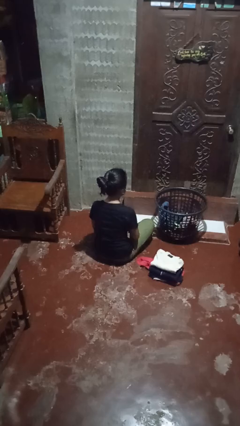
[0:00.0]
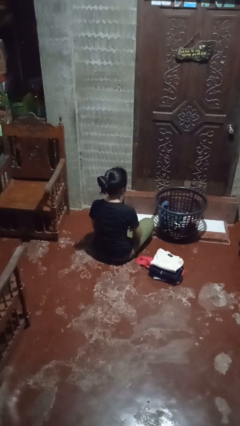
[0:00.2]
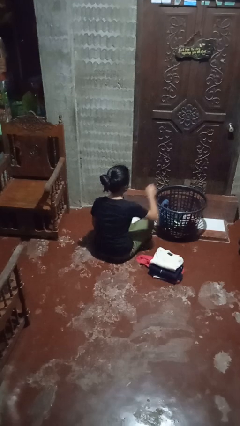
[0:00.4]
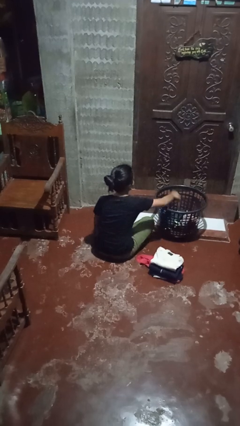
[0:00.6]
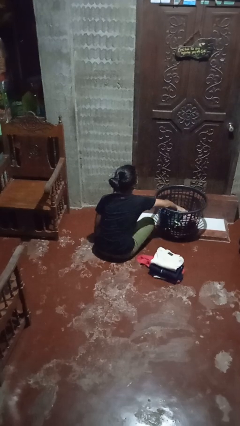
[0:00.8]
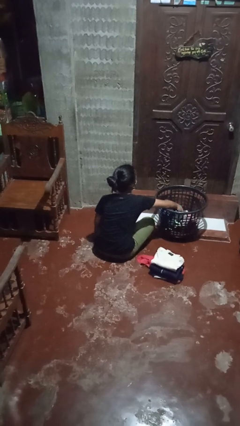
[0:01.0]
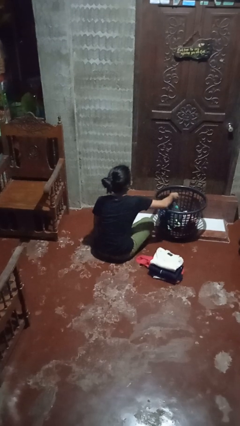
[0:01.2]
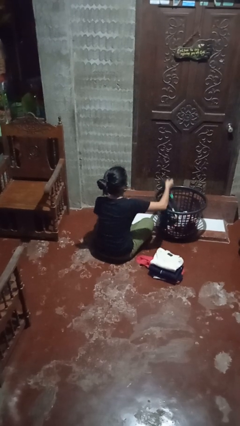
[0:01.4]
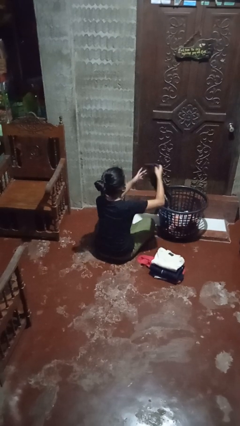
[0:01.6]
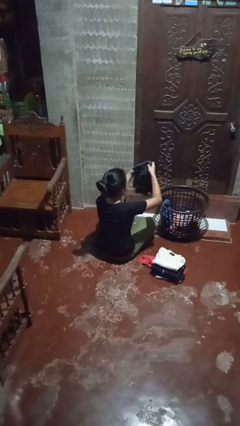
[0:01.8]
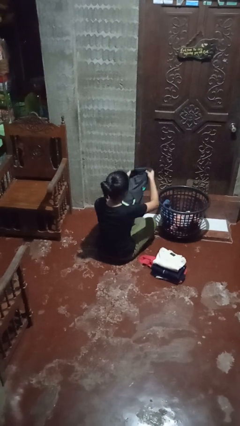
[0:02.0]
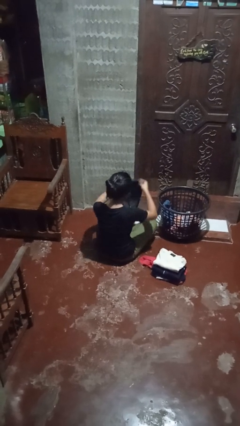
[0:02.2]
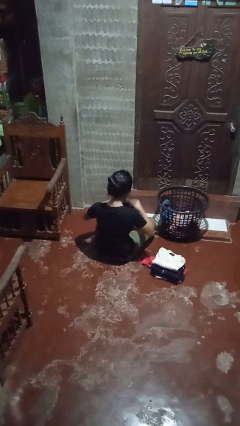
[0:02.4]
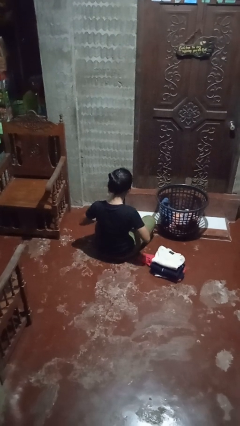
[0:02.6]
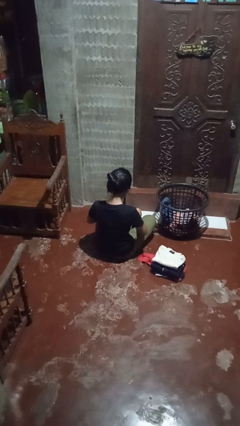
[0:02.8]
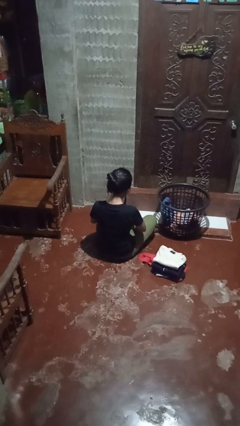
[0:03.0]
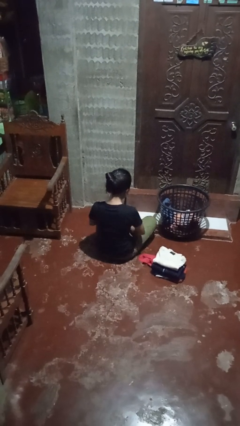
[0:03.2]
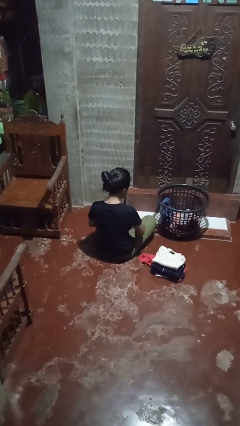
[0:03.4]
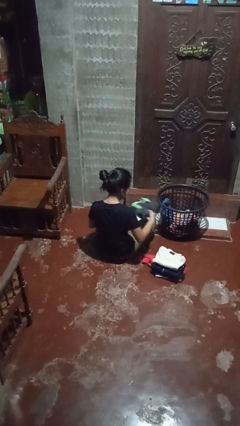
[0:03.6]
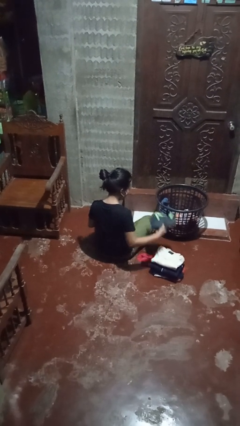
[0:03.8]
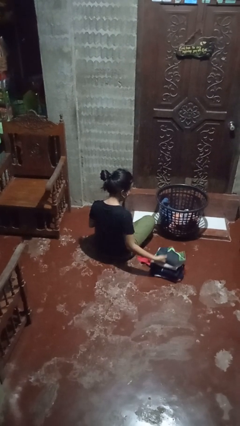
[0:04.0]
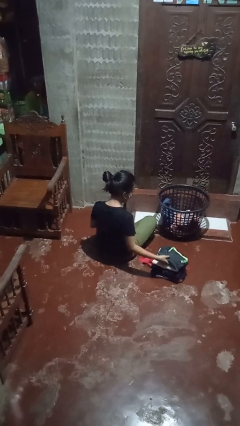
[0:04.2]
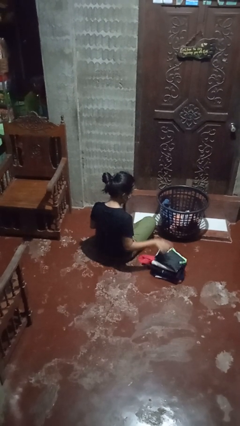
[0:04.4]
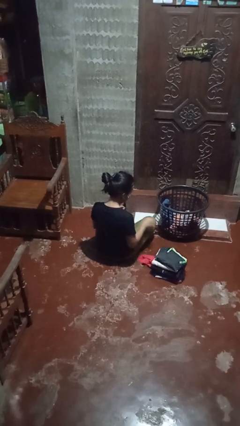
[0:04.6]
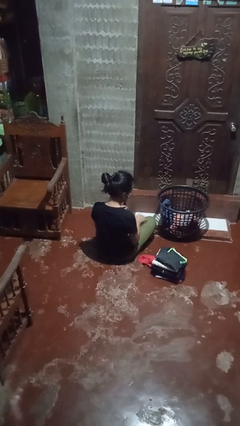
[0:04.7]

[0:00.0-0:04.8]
person folds shirt

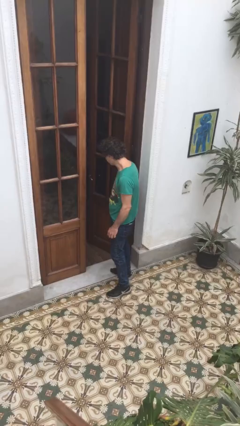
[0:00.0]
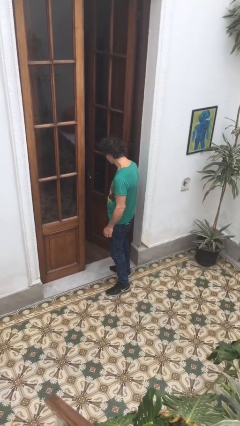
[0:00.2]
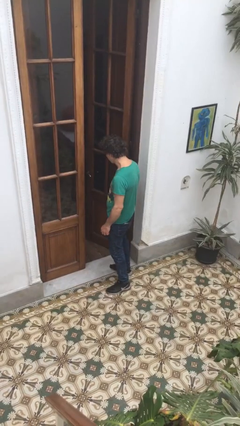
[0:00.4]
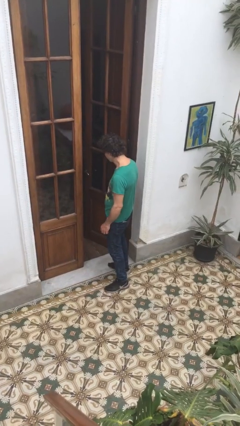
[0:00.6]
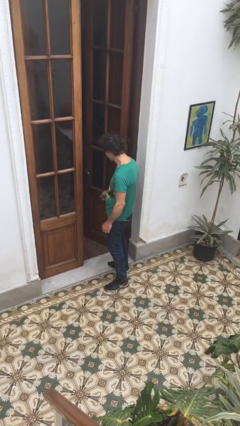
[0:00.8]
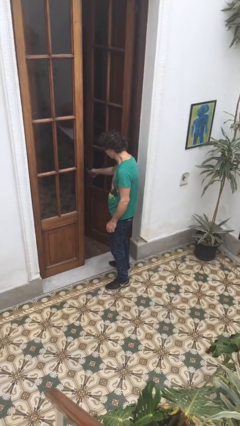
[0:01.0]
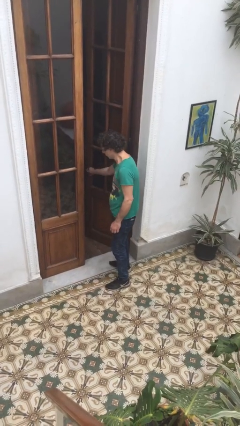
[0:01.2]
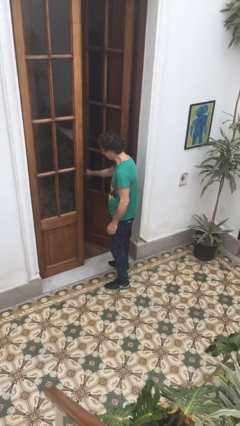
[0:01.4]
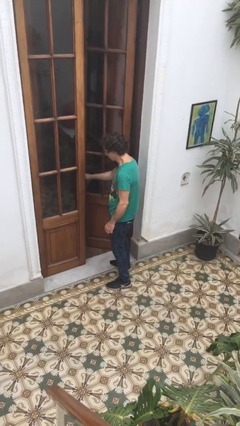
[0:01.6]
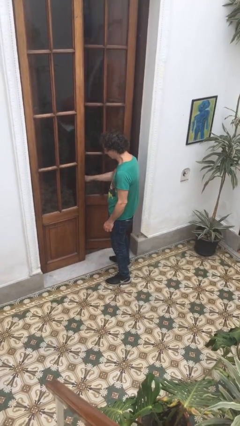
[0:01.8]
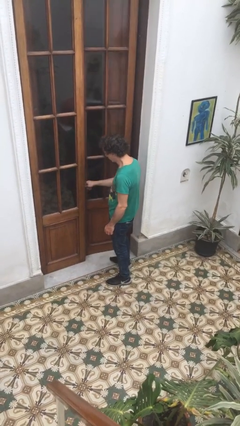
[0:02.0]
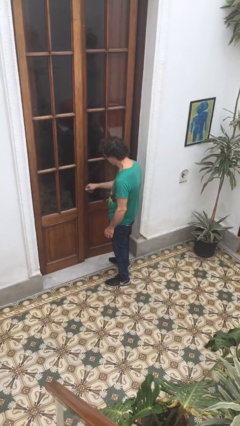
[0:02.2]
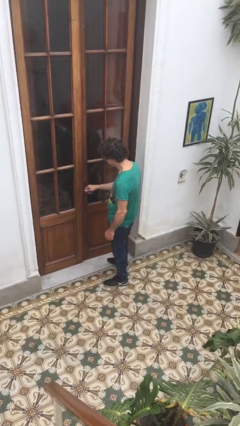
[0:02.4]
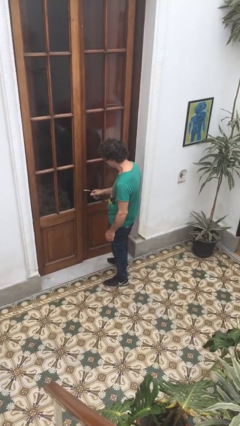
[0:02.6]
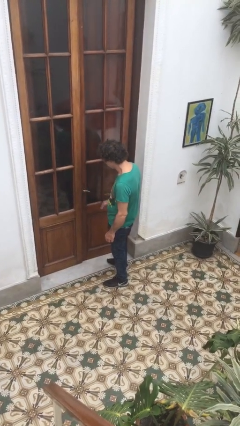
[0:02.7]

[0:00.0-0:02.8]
person closes facility door

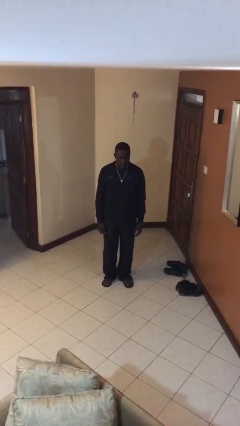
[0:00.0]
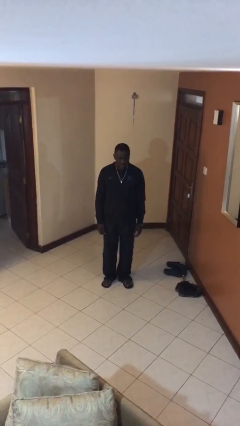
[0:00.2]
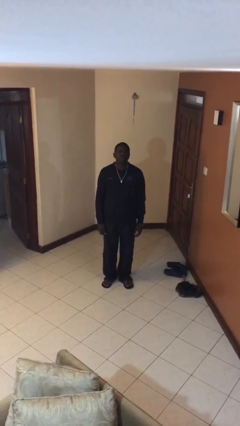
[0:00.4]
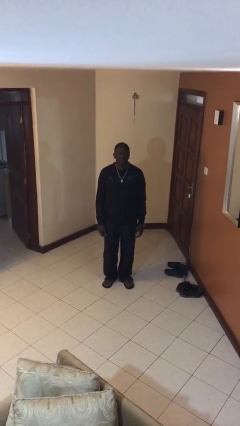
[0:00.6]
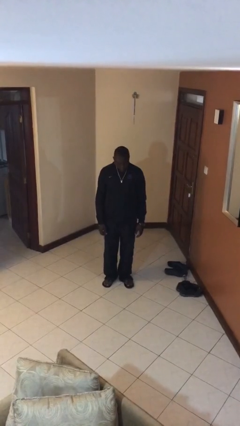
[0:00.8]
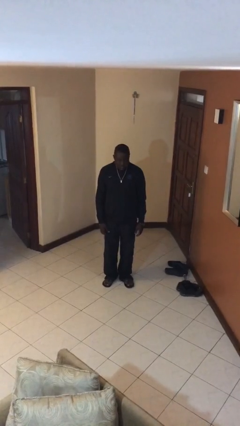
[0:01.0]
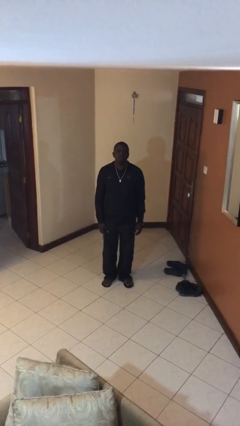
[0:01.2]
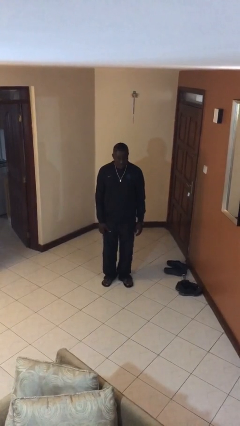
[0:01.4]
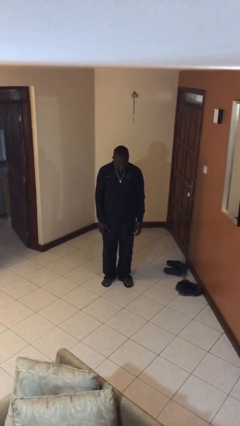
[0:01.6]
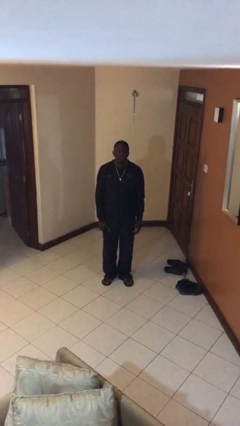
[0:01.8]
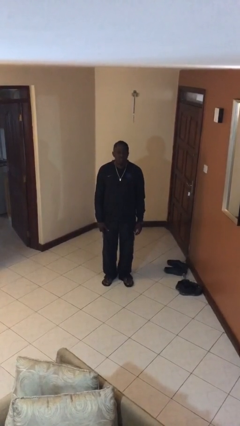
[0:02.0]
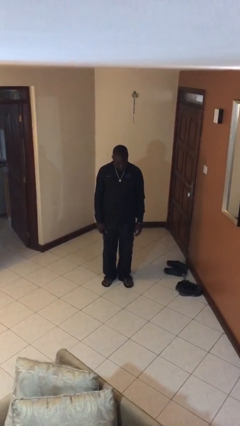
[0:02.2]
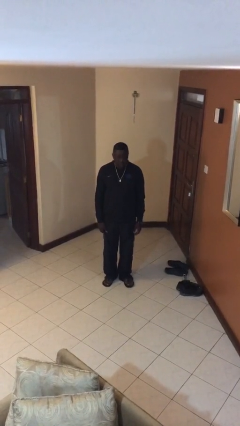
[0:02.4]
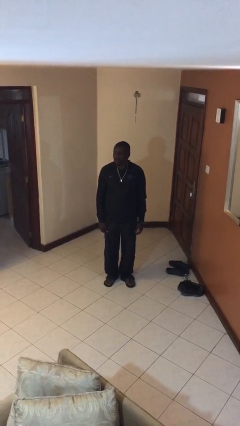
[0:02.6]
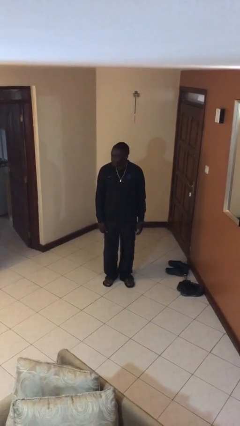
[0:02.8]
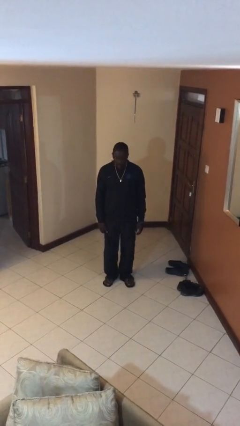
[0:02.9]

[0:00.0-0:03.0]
person nods head

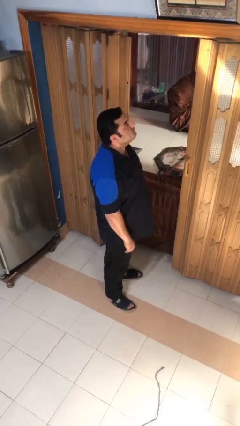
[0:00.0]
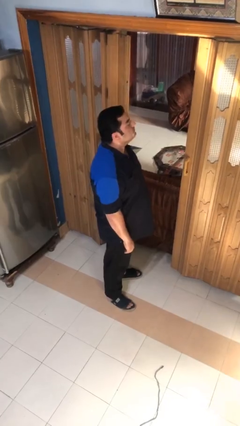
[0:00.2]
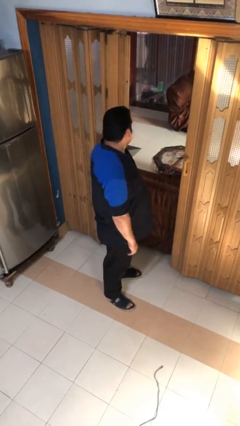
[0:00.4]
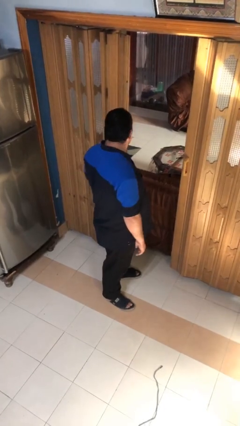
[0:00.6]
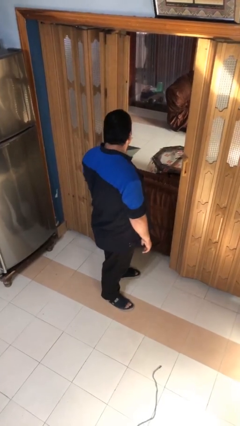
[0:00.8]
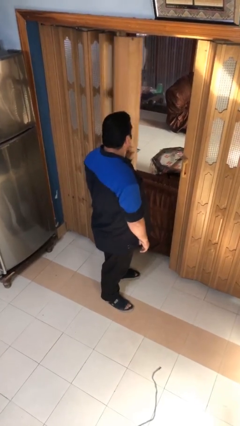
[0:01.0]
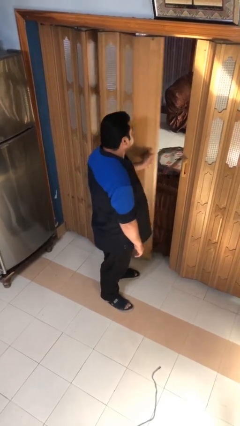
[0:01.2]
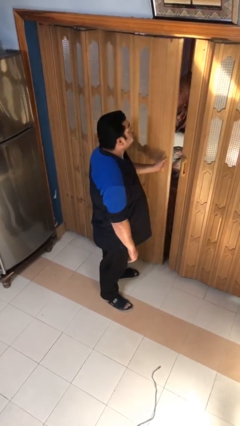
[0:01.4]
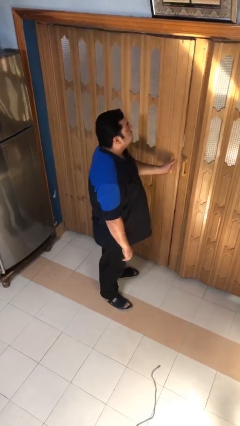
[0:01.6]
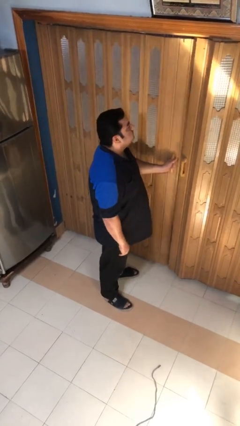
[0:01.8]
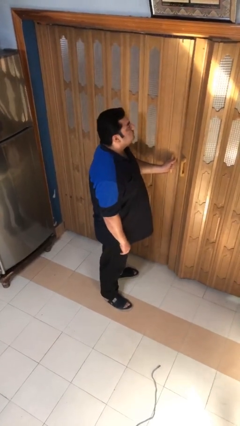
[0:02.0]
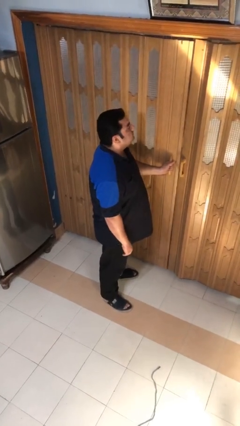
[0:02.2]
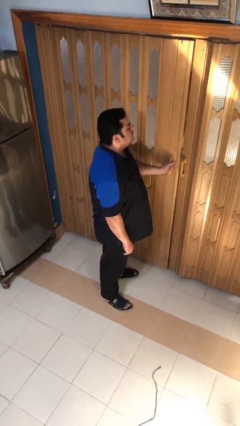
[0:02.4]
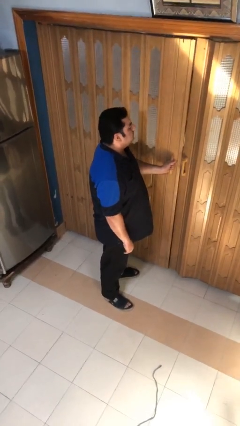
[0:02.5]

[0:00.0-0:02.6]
person closes sliding door

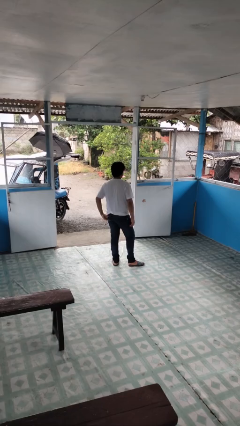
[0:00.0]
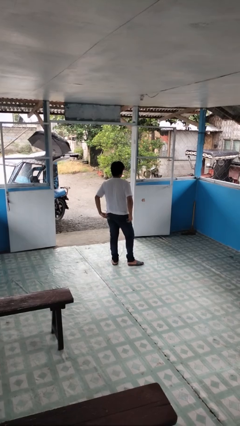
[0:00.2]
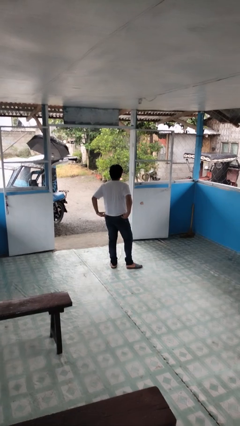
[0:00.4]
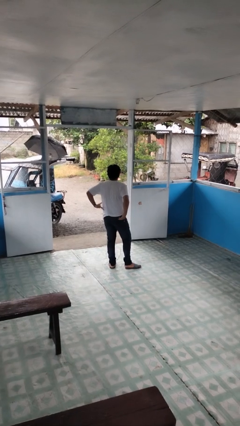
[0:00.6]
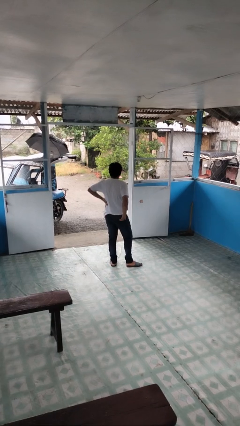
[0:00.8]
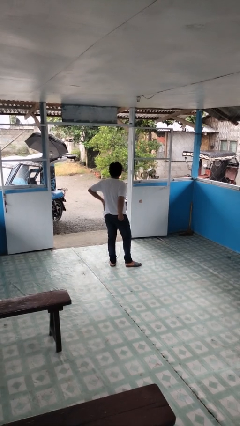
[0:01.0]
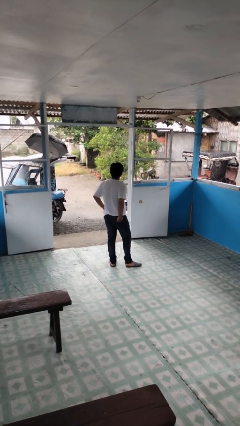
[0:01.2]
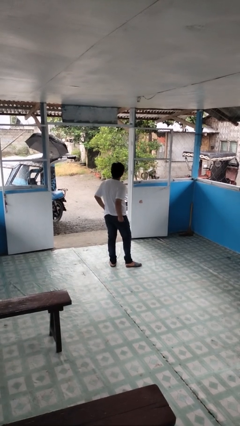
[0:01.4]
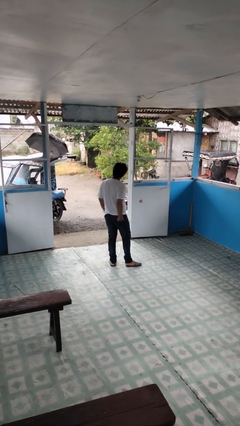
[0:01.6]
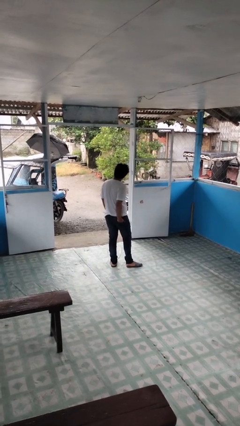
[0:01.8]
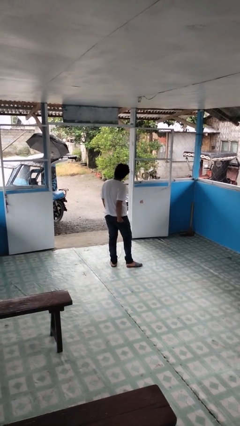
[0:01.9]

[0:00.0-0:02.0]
person puts hands in back pockets

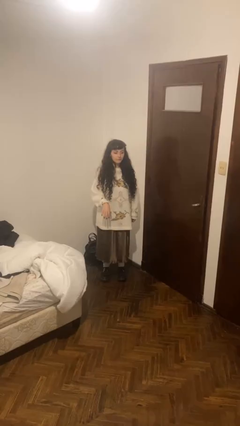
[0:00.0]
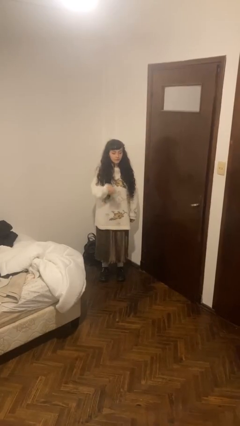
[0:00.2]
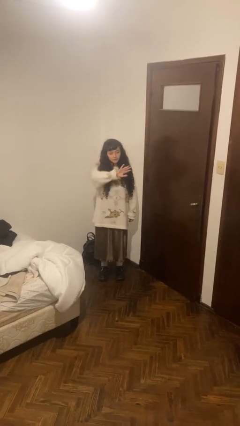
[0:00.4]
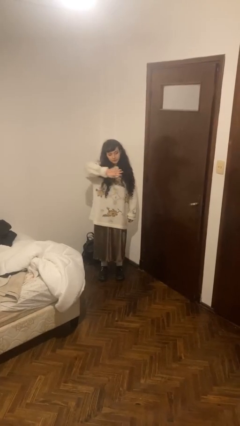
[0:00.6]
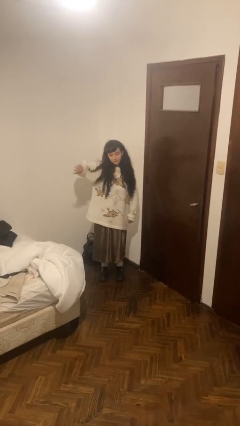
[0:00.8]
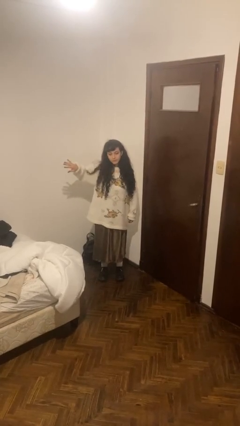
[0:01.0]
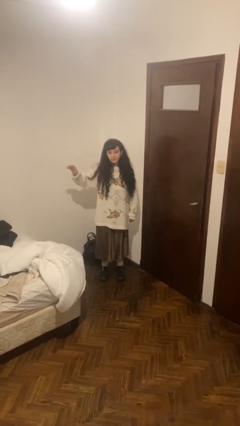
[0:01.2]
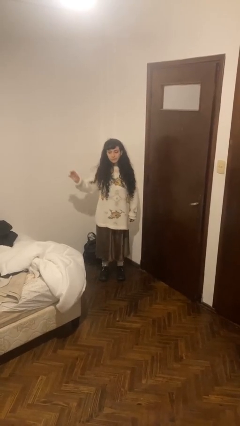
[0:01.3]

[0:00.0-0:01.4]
person gestures swipe right

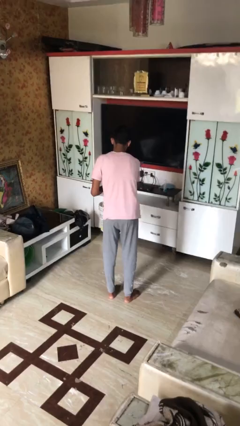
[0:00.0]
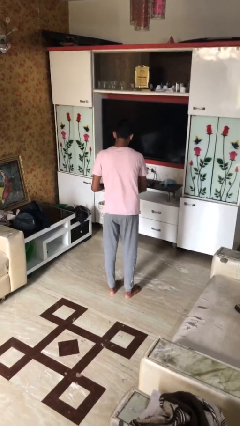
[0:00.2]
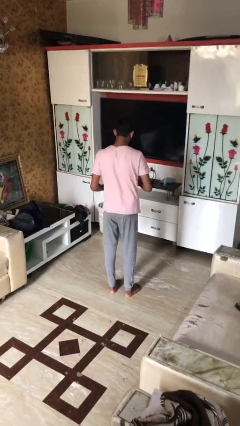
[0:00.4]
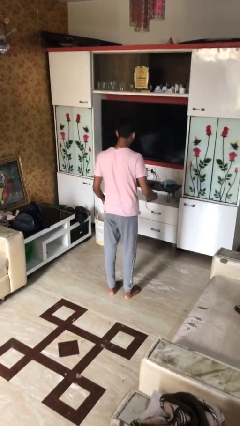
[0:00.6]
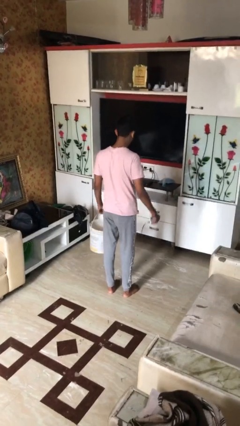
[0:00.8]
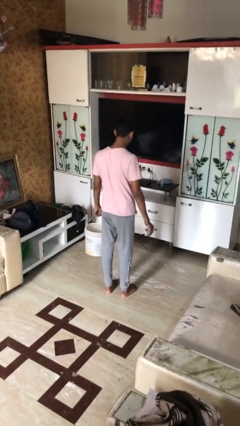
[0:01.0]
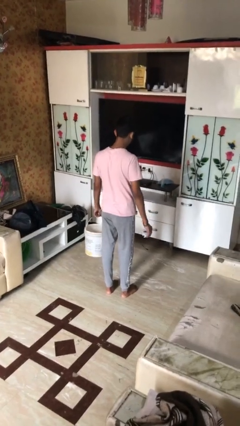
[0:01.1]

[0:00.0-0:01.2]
person takes object from basket
